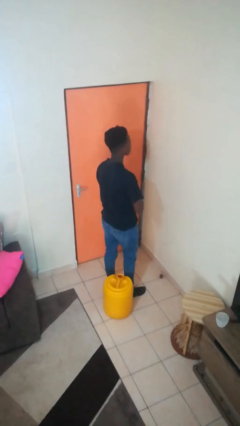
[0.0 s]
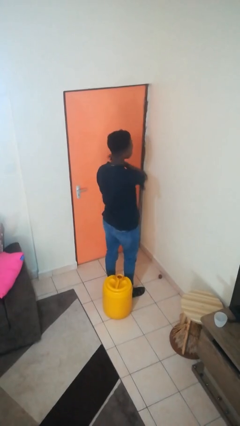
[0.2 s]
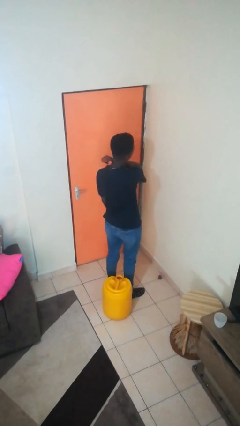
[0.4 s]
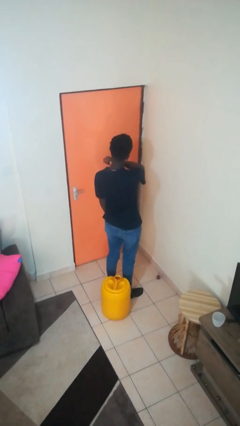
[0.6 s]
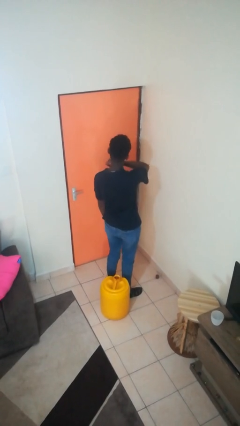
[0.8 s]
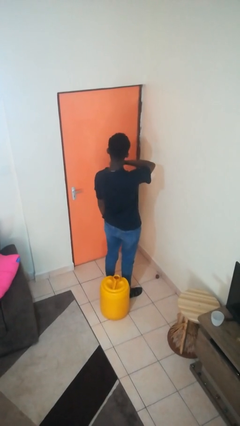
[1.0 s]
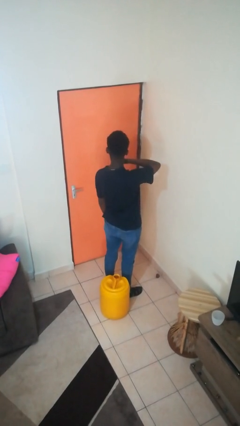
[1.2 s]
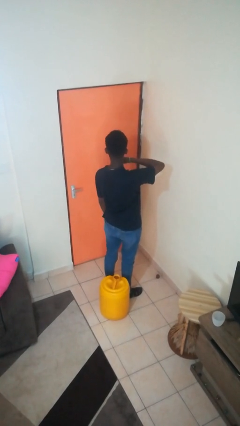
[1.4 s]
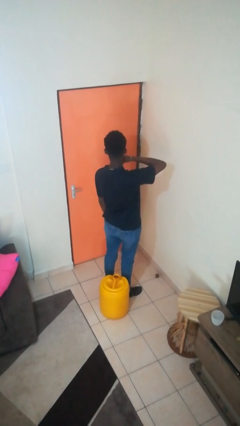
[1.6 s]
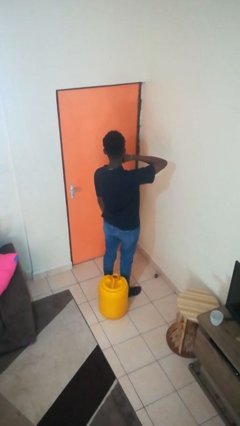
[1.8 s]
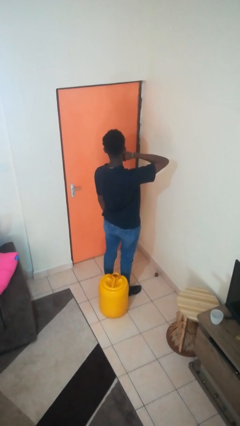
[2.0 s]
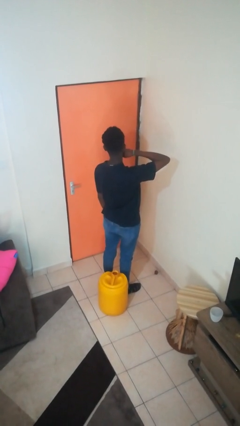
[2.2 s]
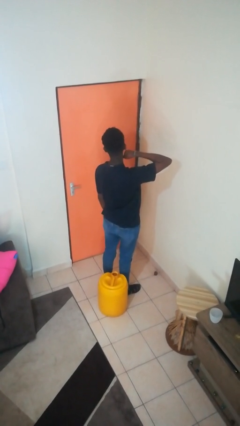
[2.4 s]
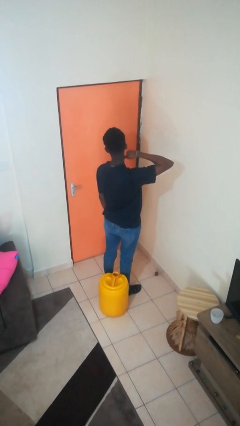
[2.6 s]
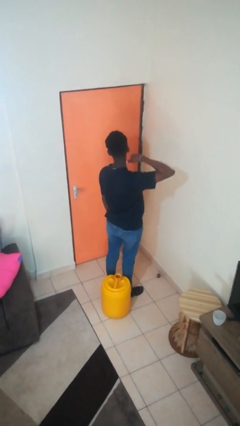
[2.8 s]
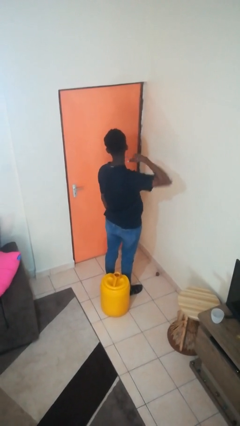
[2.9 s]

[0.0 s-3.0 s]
person gestures cut

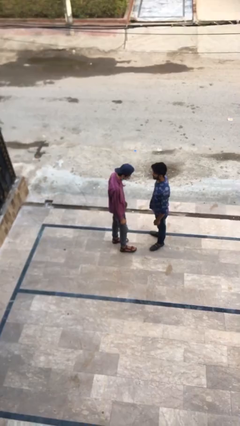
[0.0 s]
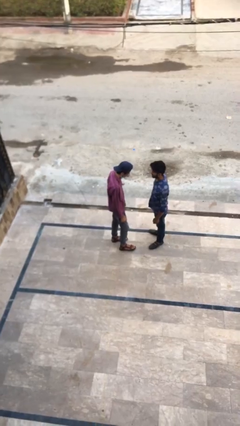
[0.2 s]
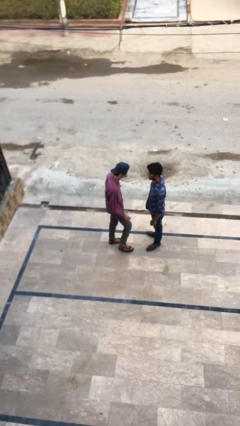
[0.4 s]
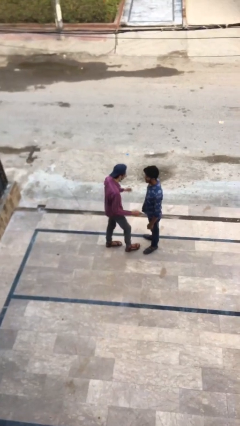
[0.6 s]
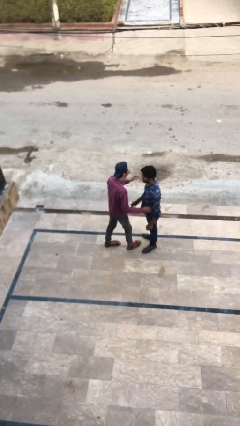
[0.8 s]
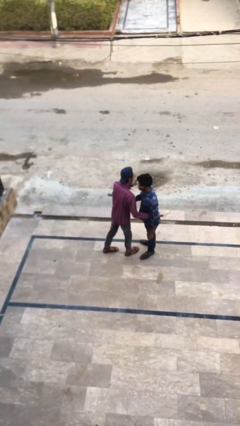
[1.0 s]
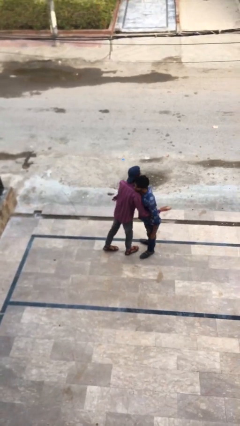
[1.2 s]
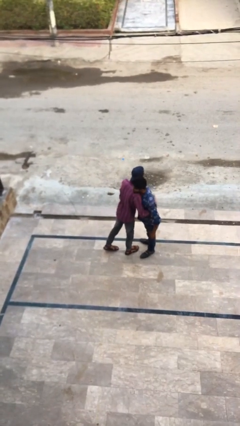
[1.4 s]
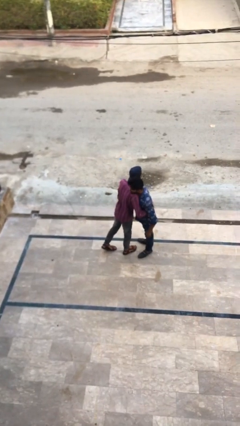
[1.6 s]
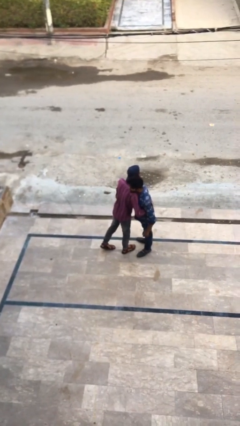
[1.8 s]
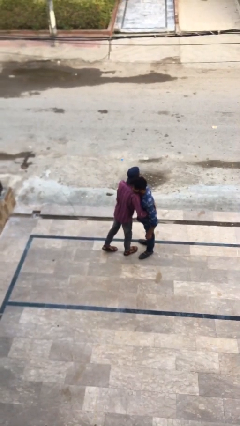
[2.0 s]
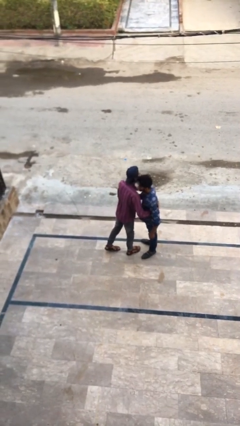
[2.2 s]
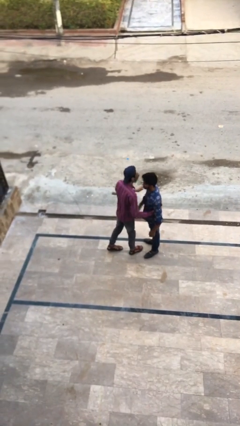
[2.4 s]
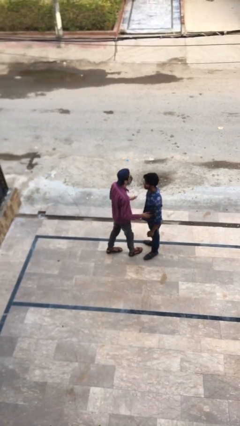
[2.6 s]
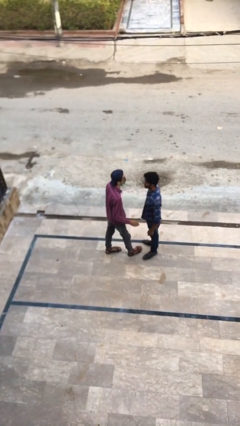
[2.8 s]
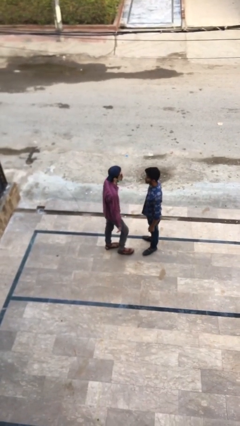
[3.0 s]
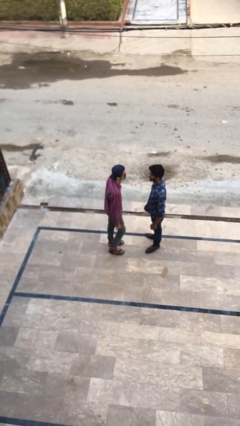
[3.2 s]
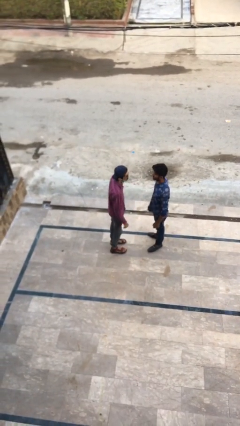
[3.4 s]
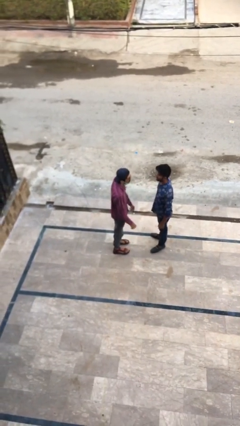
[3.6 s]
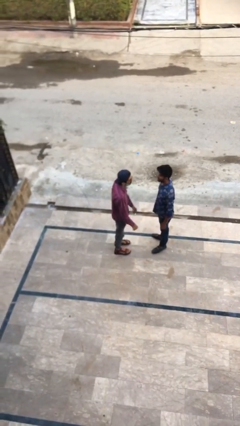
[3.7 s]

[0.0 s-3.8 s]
person embraces person

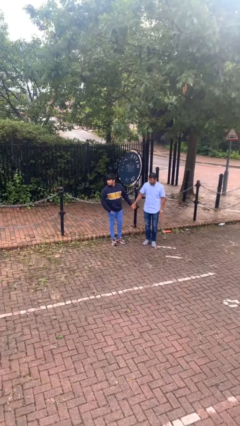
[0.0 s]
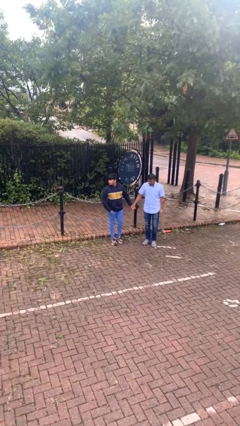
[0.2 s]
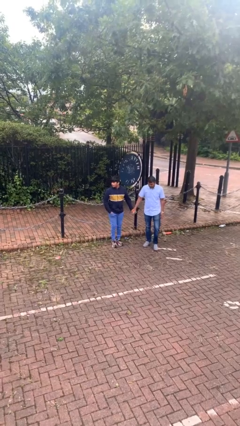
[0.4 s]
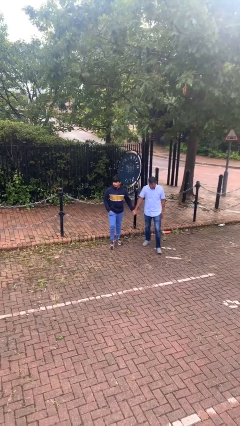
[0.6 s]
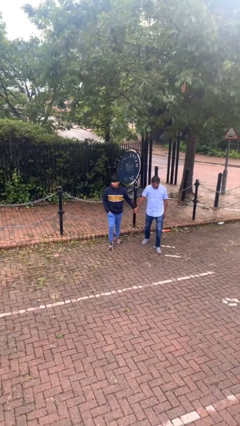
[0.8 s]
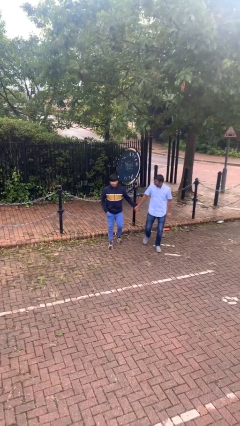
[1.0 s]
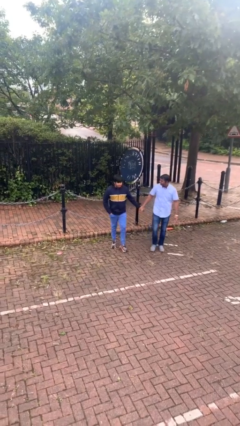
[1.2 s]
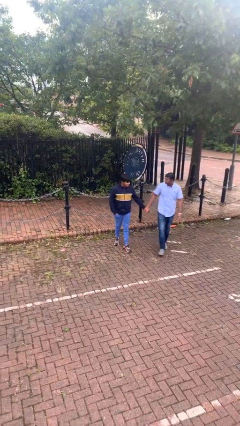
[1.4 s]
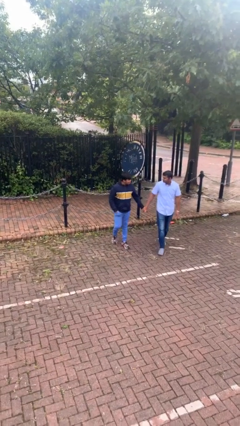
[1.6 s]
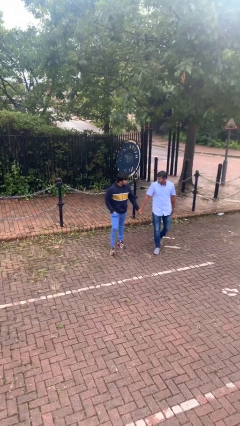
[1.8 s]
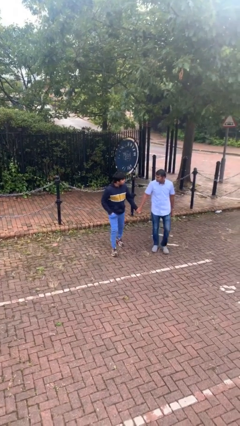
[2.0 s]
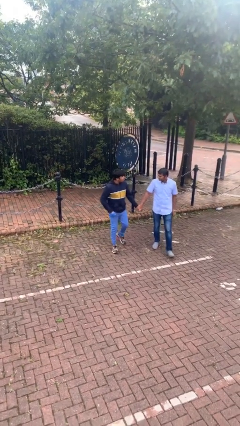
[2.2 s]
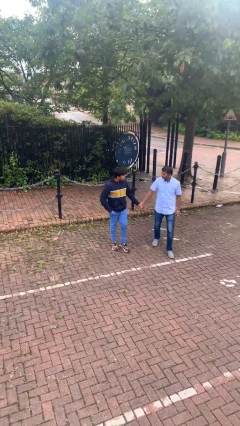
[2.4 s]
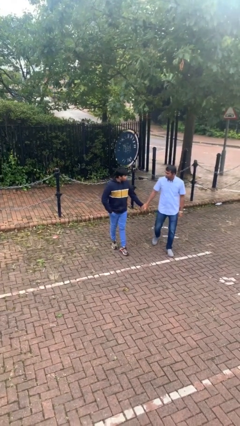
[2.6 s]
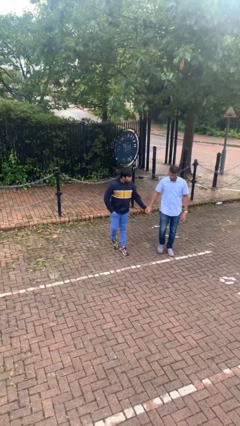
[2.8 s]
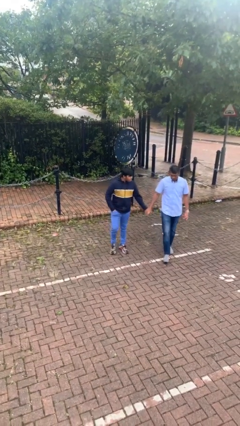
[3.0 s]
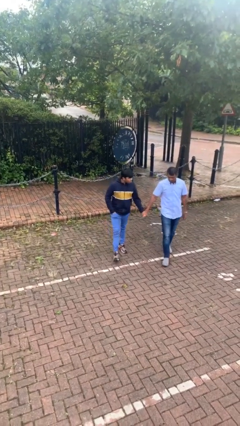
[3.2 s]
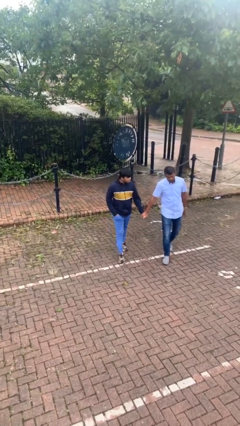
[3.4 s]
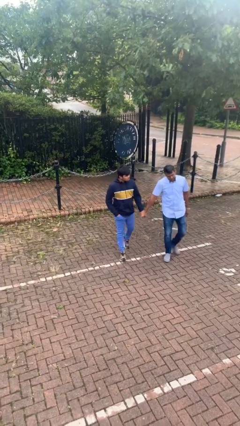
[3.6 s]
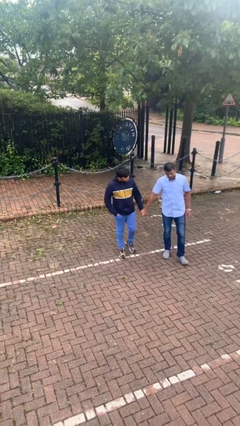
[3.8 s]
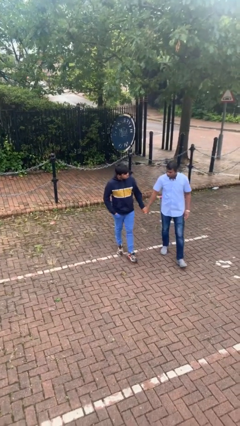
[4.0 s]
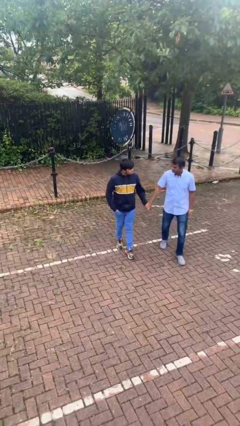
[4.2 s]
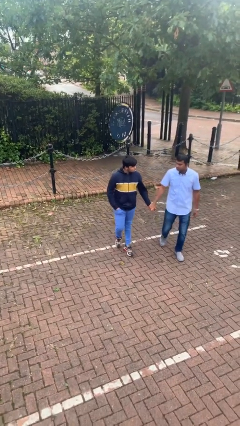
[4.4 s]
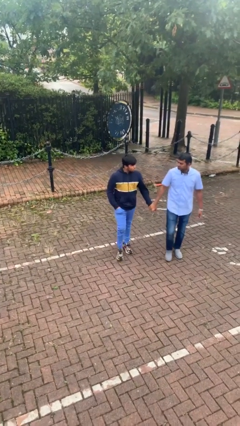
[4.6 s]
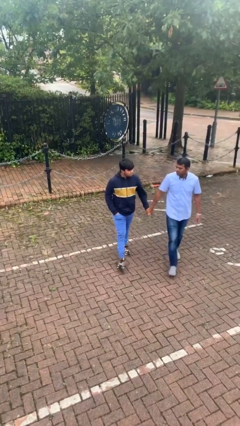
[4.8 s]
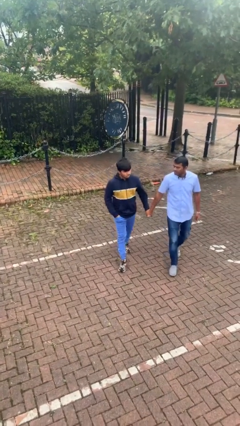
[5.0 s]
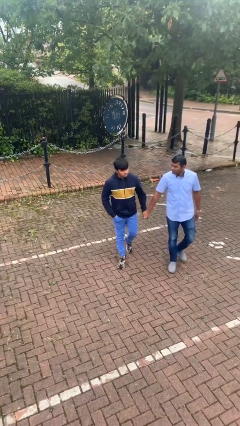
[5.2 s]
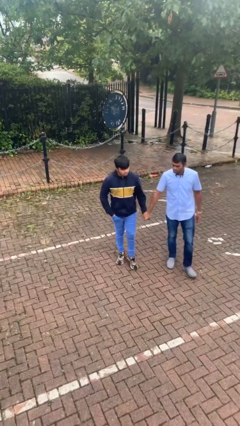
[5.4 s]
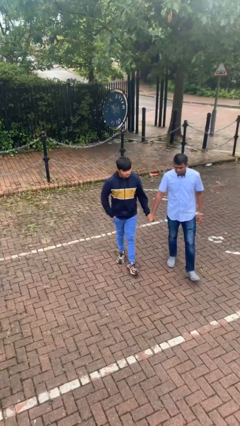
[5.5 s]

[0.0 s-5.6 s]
person holds hand

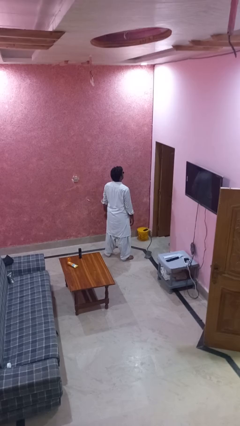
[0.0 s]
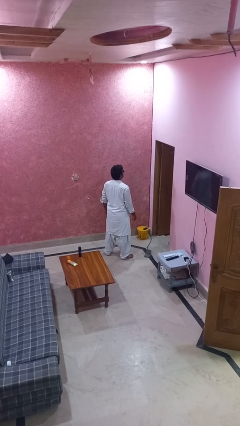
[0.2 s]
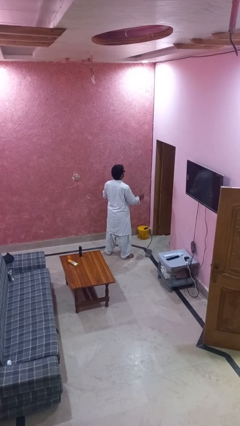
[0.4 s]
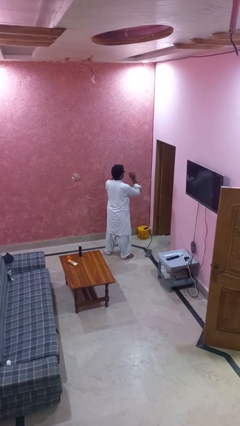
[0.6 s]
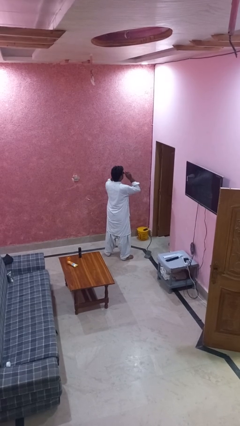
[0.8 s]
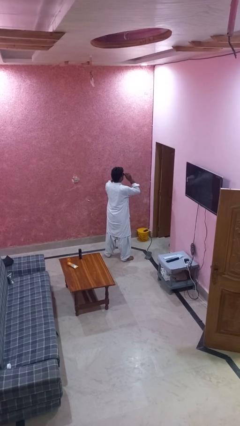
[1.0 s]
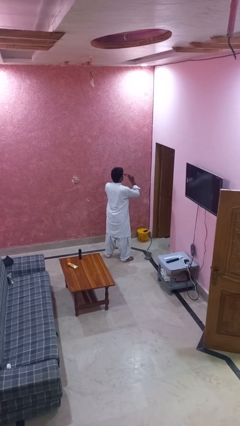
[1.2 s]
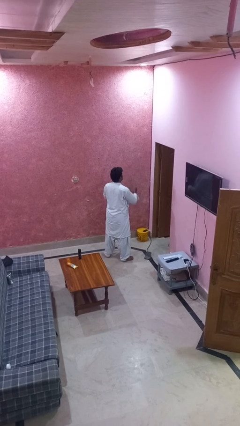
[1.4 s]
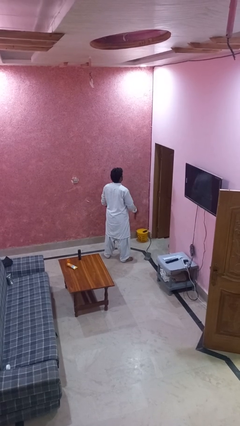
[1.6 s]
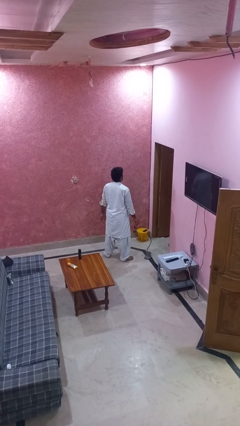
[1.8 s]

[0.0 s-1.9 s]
person takes off sunglasses

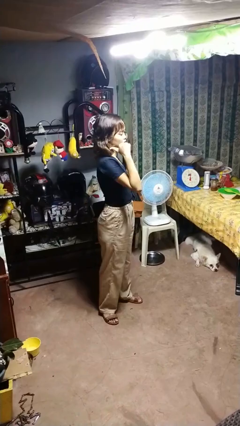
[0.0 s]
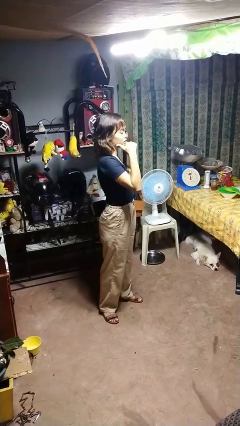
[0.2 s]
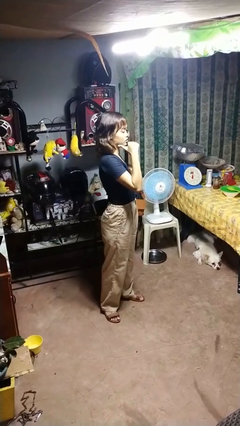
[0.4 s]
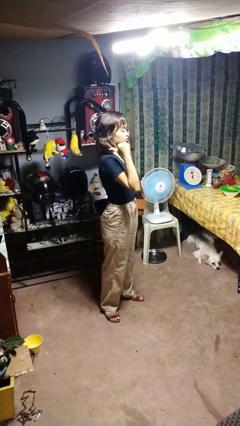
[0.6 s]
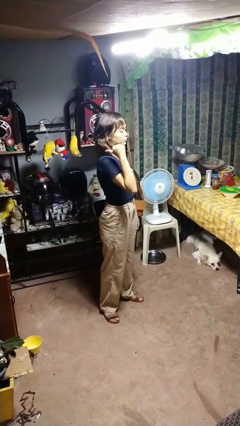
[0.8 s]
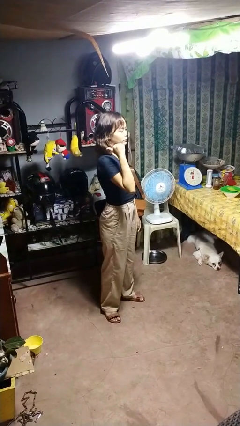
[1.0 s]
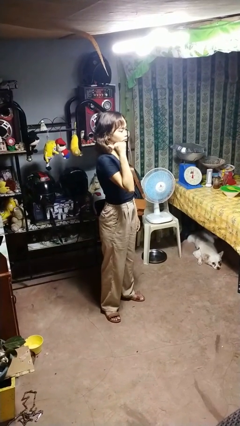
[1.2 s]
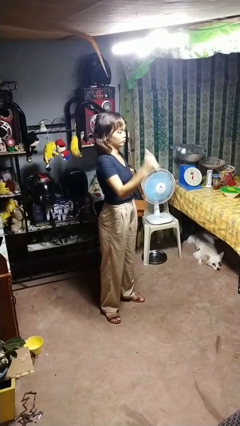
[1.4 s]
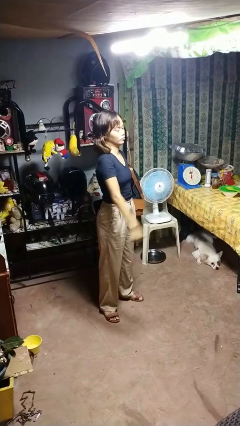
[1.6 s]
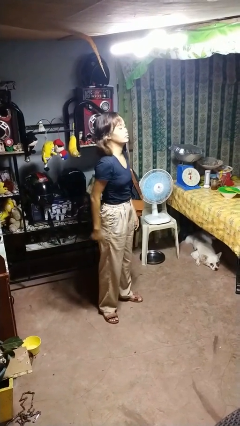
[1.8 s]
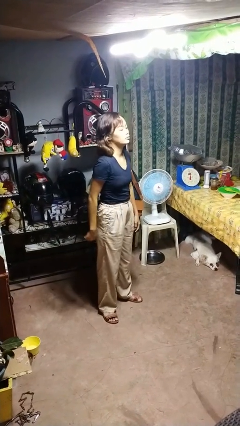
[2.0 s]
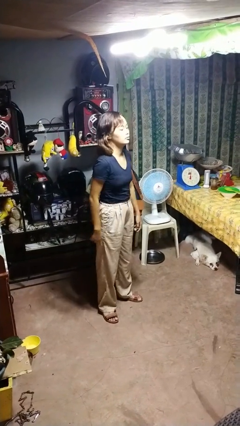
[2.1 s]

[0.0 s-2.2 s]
person gestures behind me

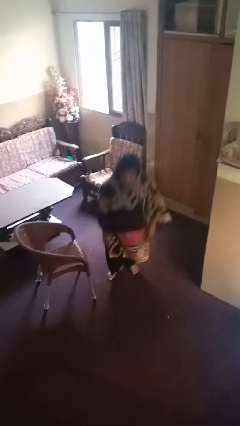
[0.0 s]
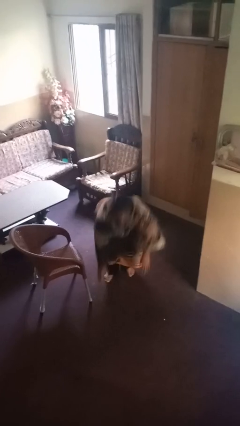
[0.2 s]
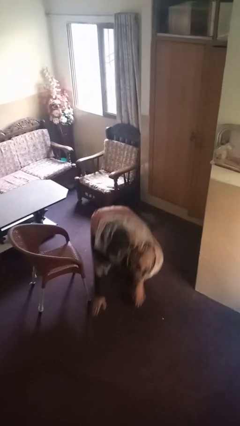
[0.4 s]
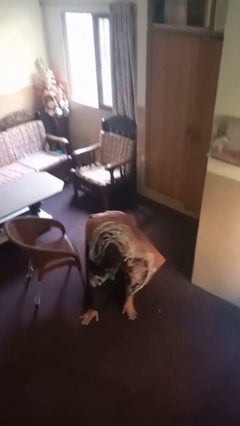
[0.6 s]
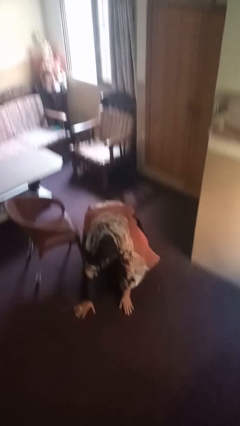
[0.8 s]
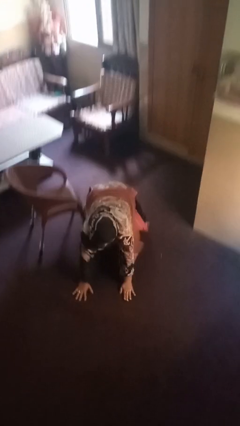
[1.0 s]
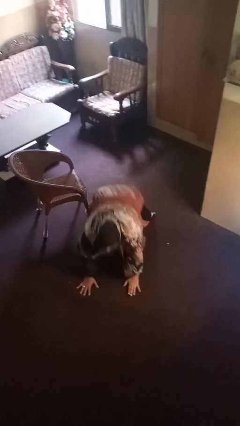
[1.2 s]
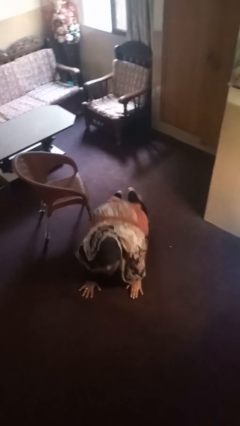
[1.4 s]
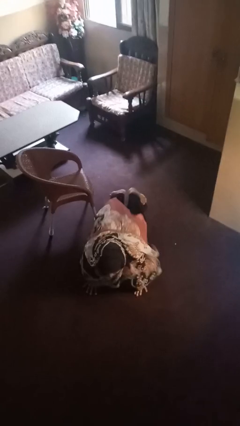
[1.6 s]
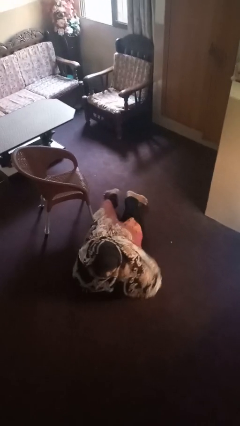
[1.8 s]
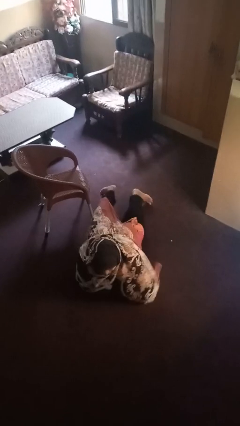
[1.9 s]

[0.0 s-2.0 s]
person lies down on floor
